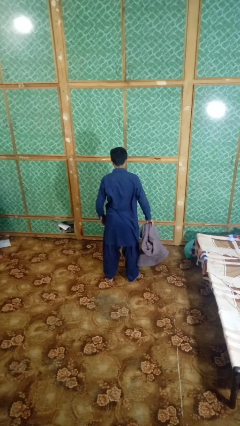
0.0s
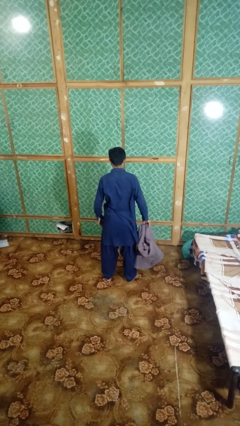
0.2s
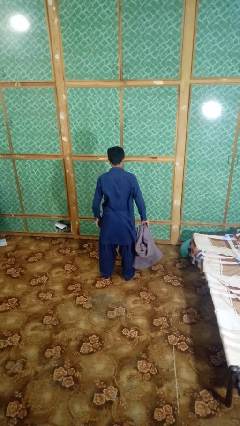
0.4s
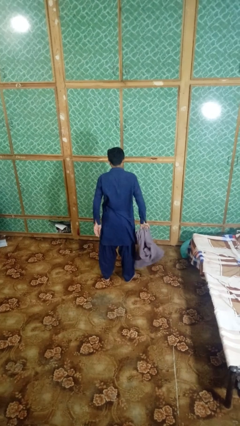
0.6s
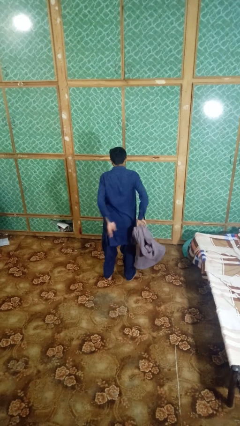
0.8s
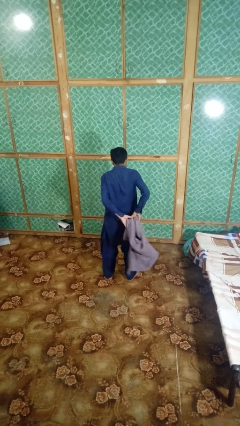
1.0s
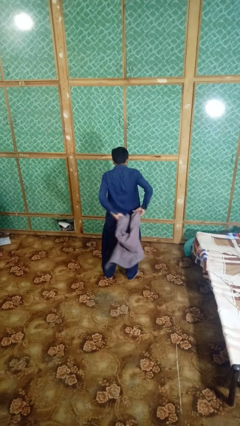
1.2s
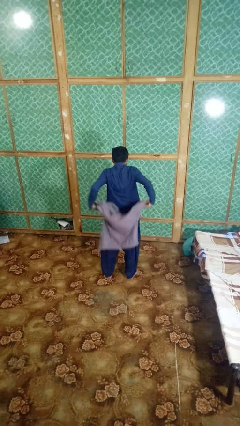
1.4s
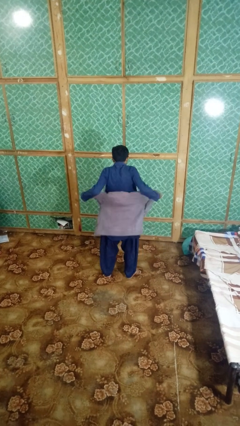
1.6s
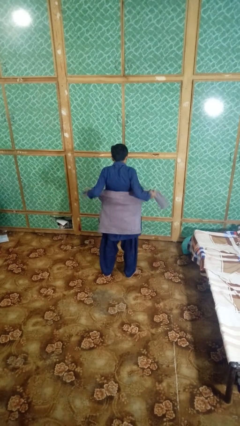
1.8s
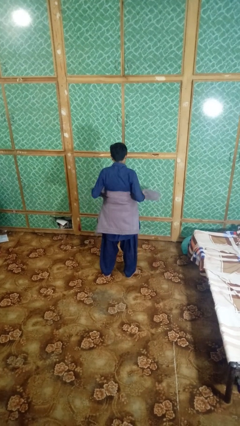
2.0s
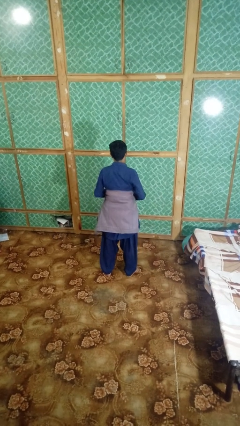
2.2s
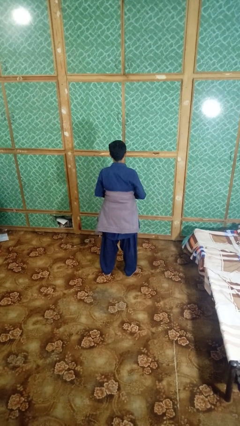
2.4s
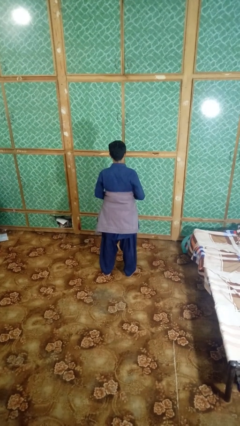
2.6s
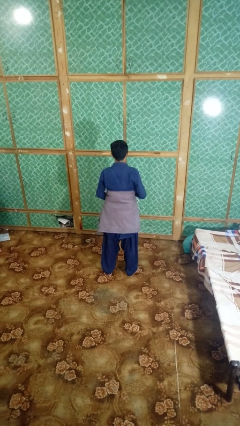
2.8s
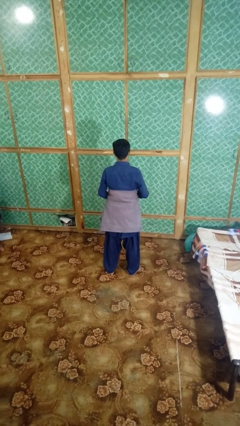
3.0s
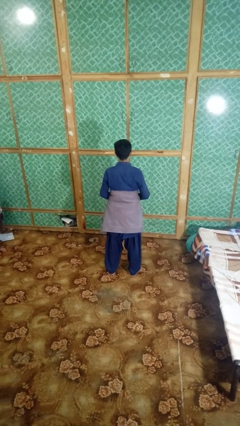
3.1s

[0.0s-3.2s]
person ties jacket around waist

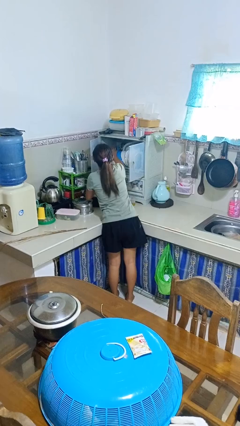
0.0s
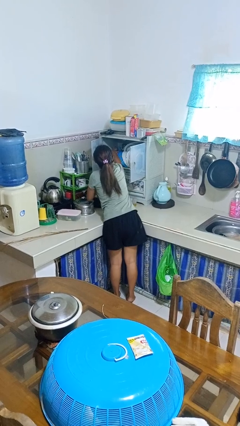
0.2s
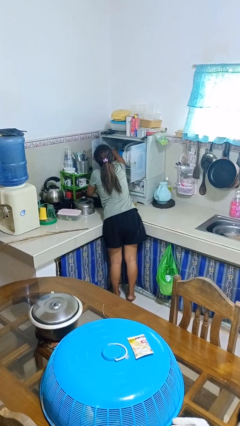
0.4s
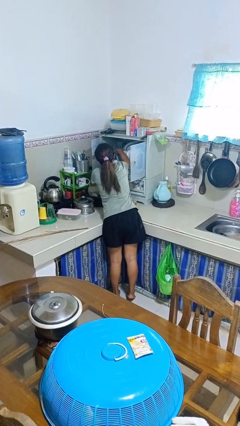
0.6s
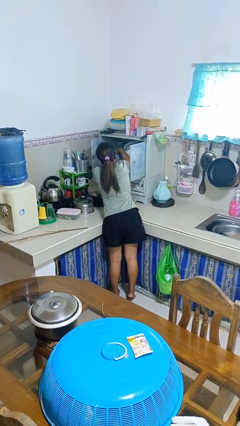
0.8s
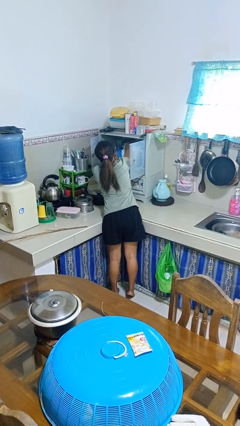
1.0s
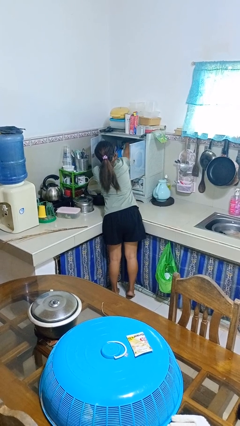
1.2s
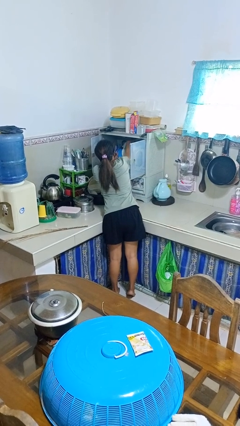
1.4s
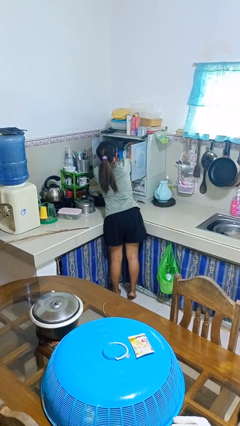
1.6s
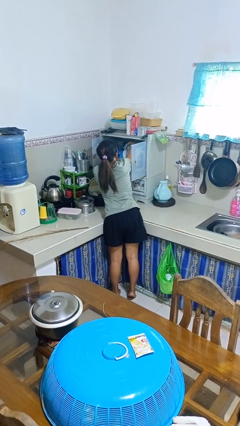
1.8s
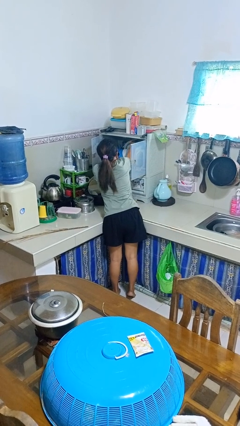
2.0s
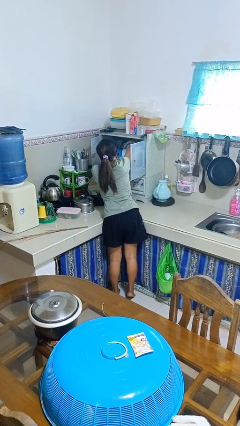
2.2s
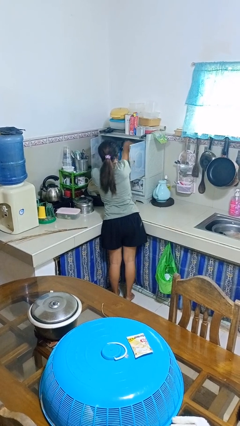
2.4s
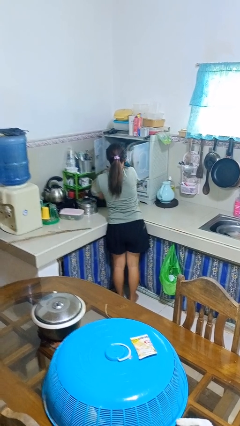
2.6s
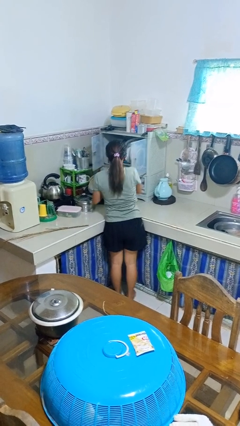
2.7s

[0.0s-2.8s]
person searches in kitchen drawer

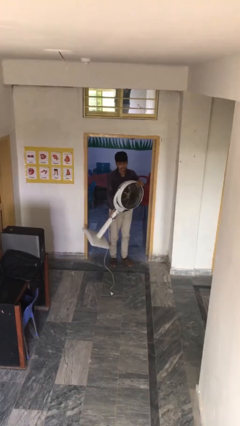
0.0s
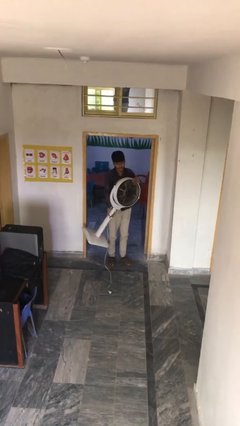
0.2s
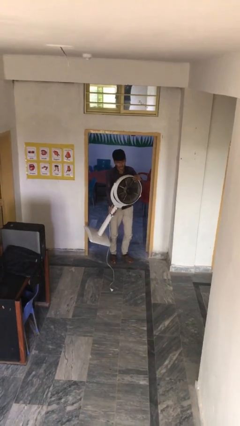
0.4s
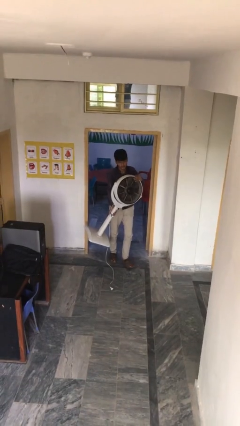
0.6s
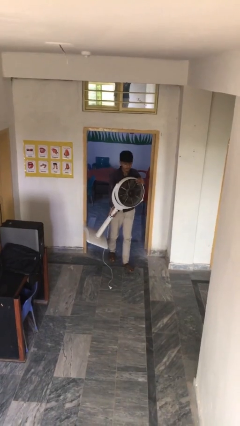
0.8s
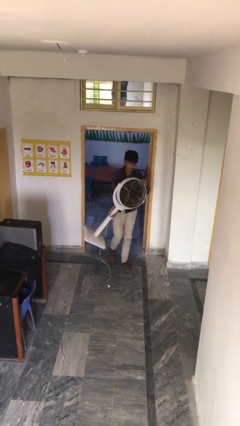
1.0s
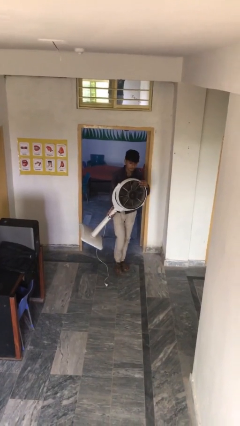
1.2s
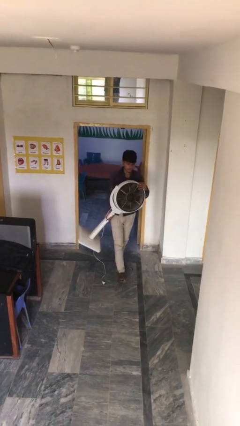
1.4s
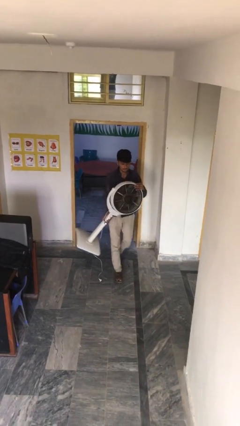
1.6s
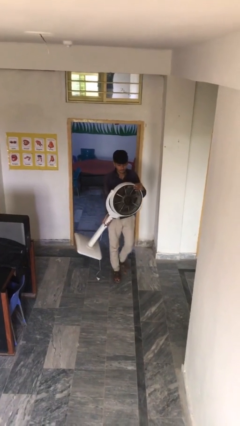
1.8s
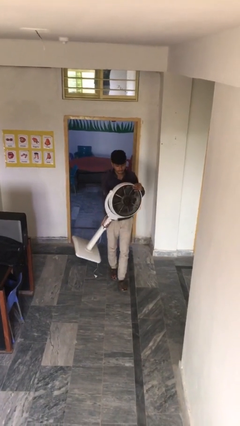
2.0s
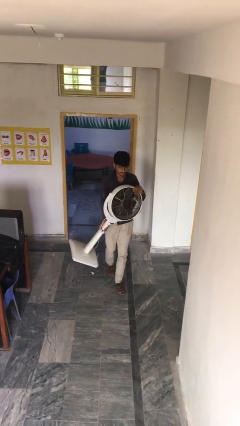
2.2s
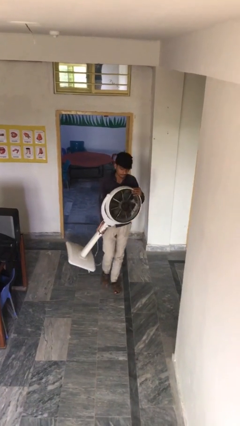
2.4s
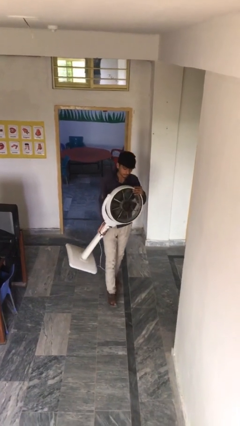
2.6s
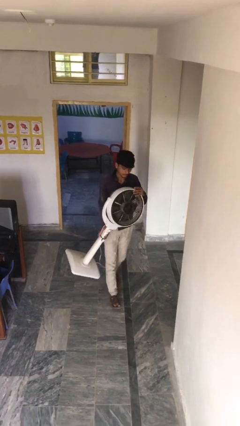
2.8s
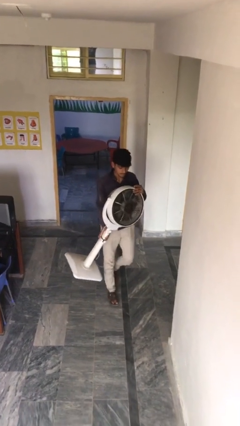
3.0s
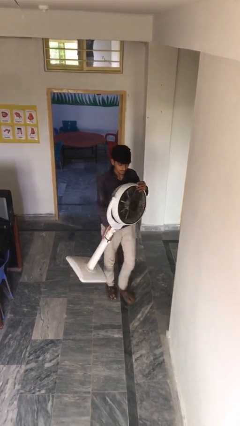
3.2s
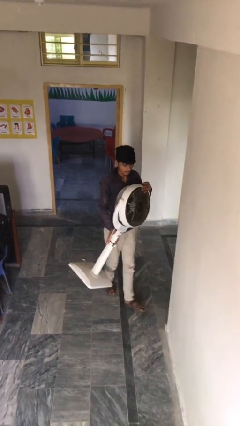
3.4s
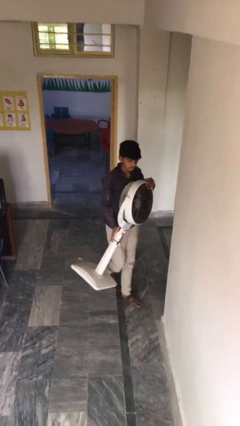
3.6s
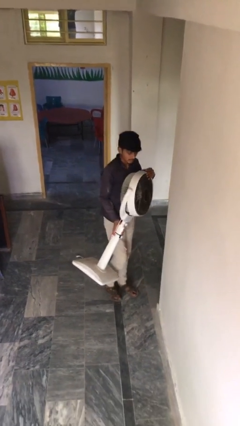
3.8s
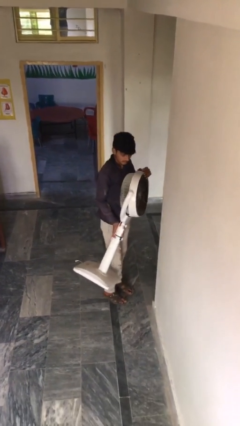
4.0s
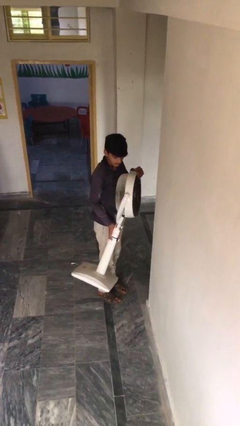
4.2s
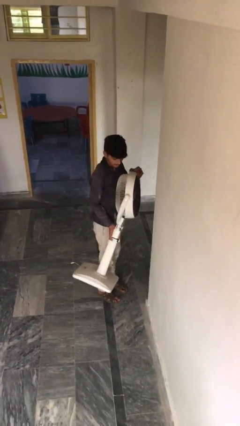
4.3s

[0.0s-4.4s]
person carries heavy object

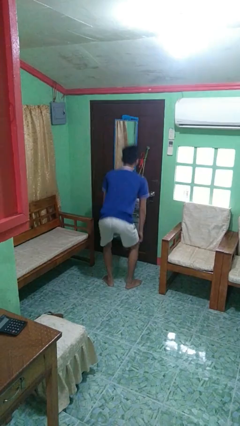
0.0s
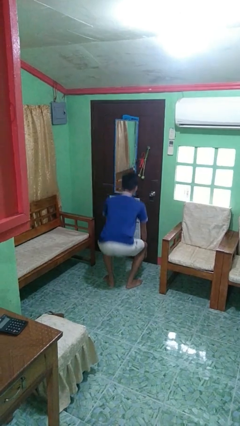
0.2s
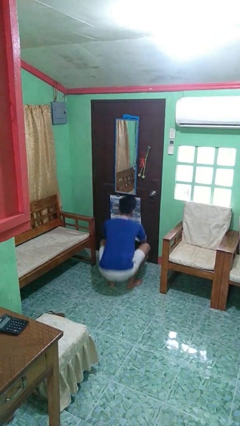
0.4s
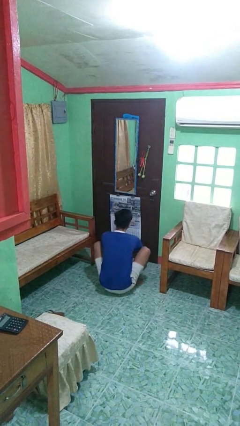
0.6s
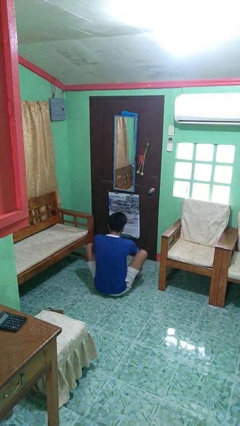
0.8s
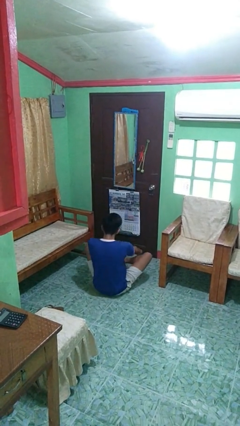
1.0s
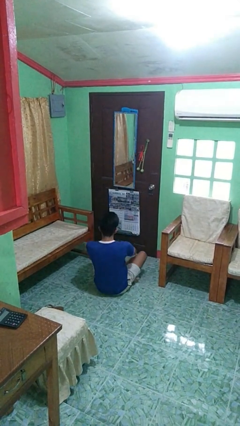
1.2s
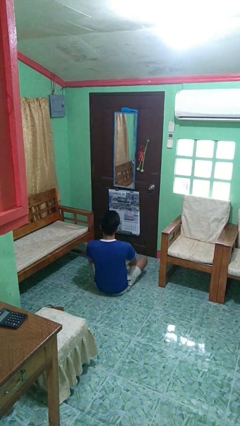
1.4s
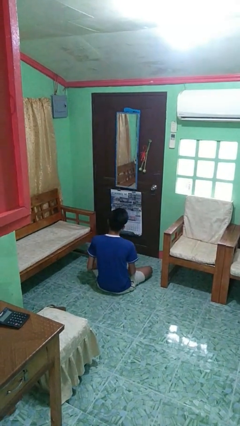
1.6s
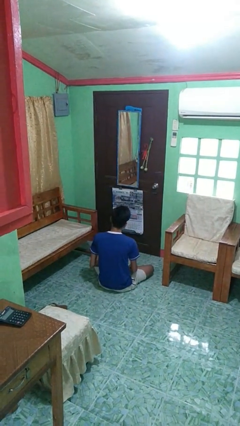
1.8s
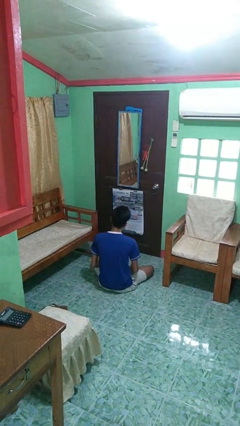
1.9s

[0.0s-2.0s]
person sits crisscross

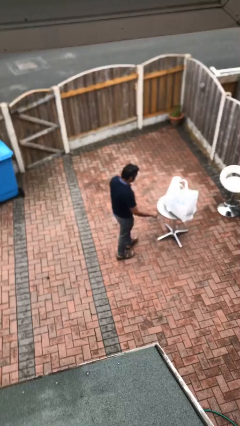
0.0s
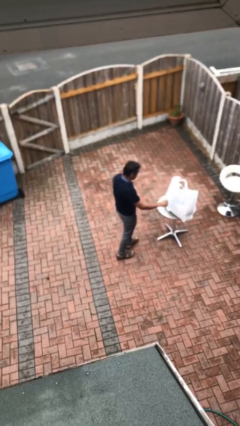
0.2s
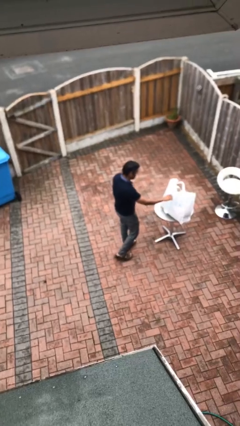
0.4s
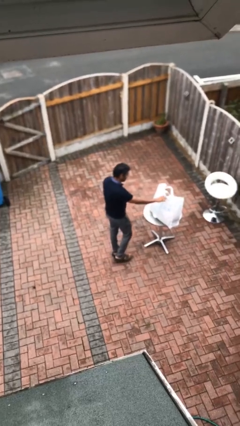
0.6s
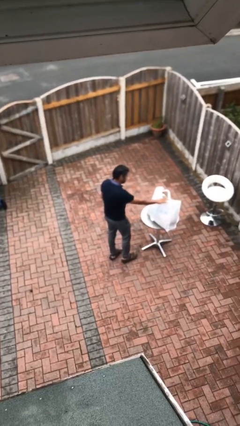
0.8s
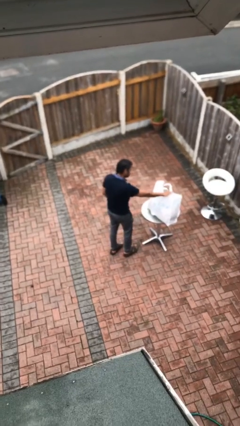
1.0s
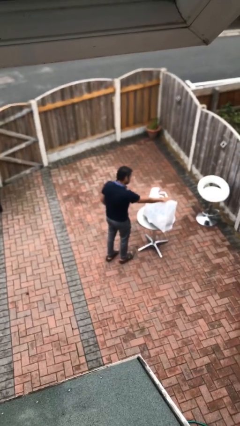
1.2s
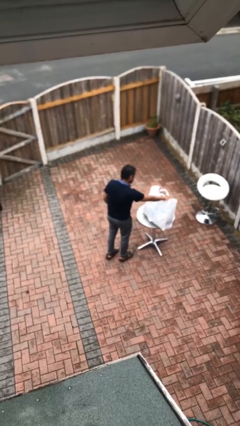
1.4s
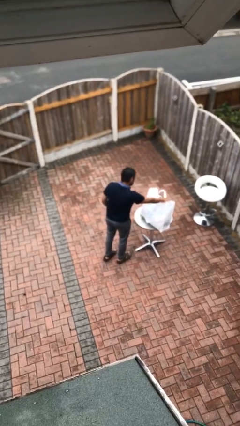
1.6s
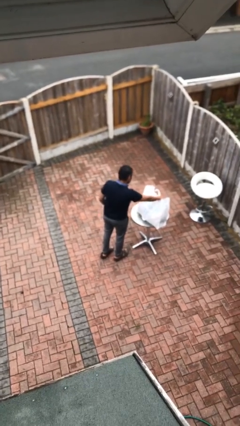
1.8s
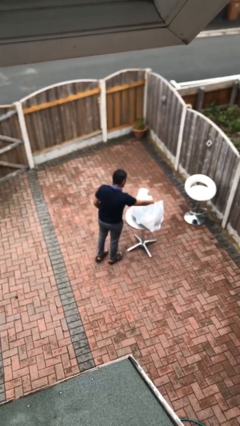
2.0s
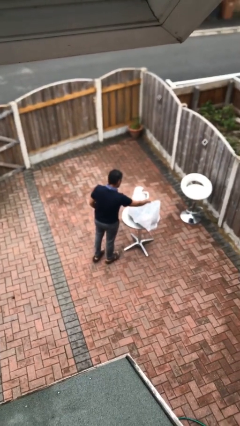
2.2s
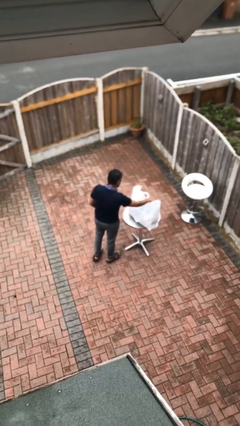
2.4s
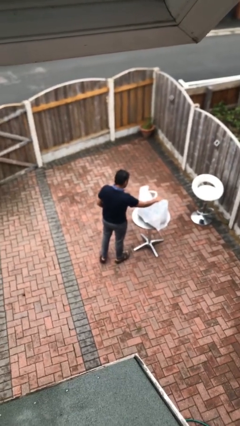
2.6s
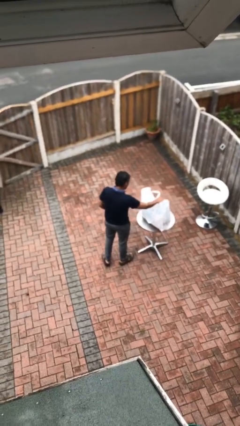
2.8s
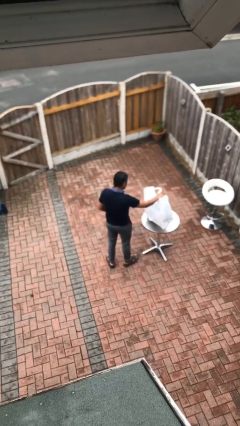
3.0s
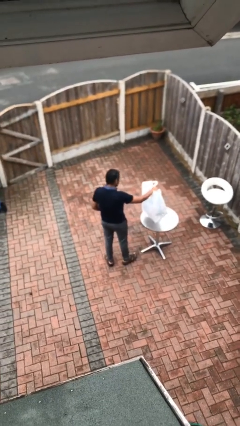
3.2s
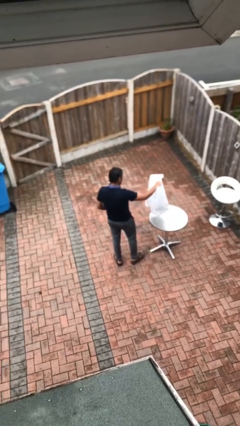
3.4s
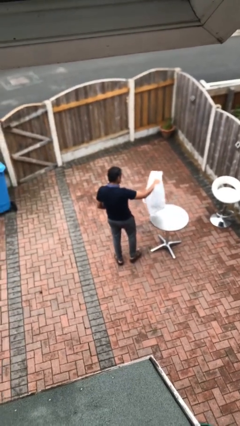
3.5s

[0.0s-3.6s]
person picks up object from table

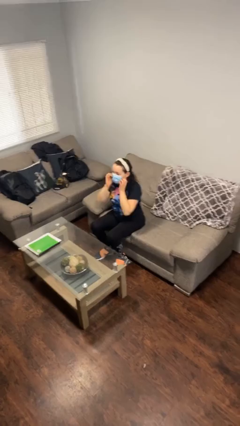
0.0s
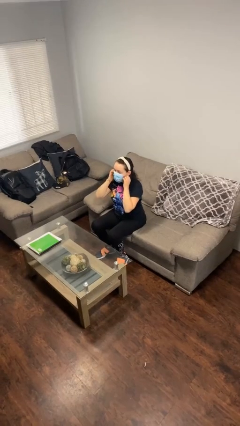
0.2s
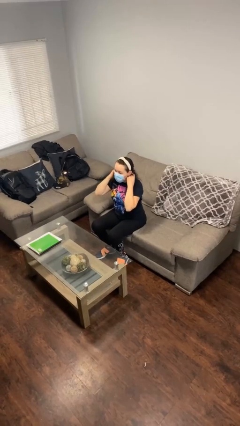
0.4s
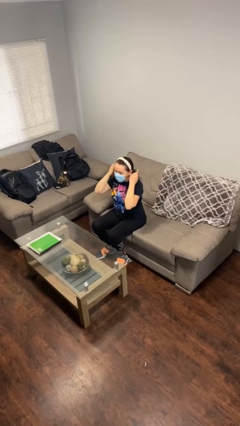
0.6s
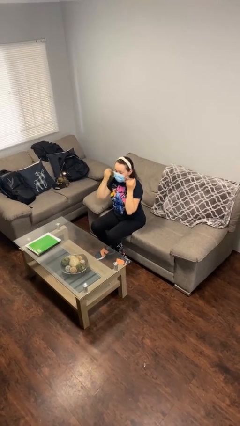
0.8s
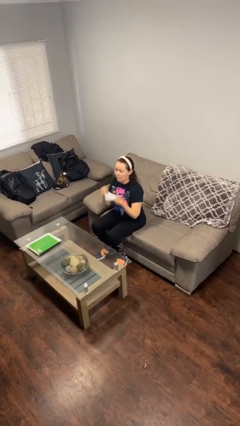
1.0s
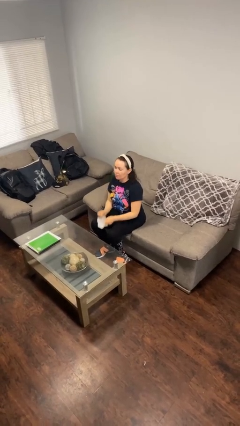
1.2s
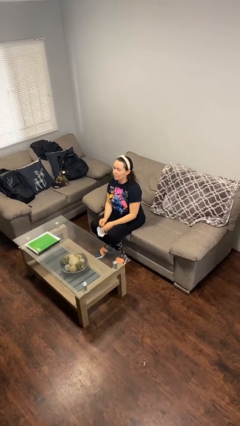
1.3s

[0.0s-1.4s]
person takes off facemask
